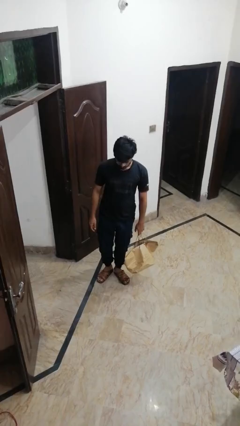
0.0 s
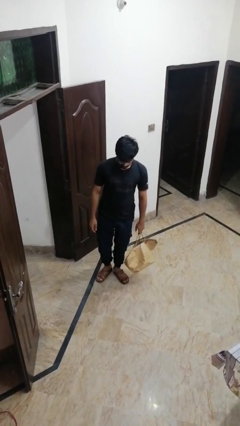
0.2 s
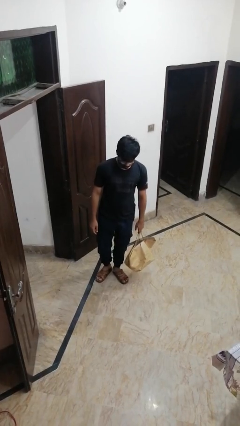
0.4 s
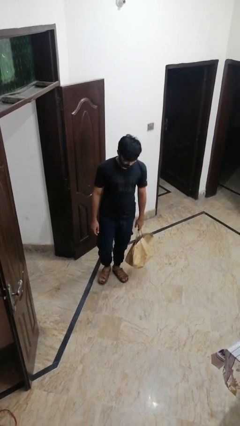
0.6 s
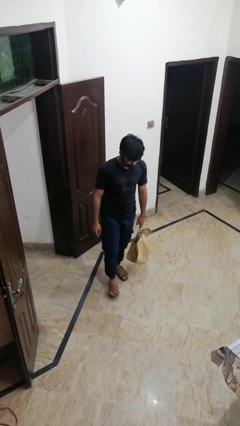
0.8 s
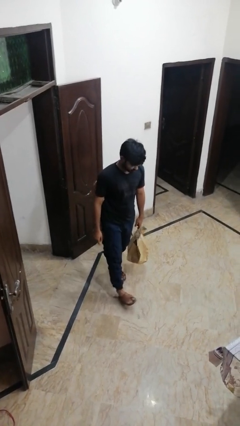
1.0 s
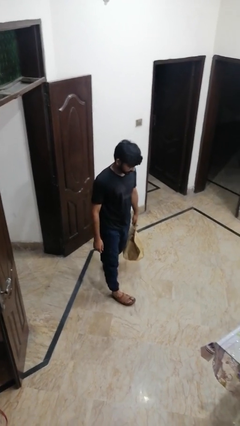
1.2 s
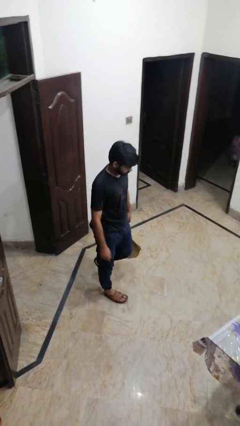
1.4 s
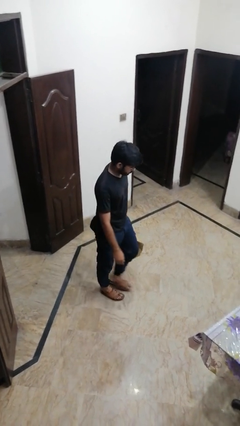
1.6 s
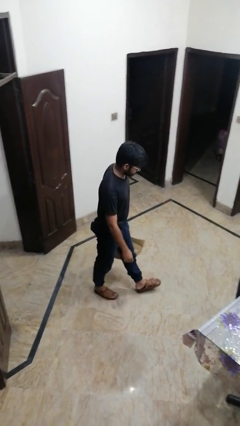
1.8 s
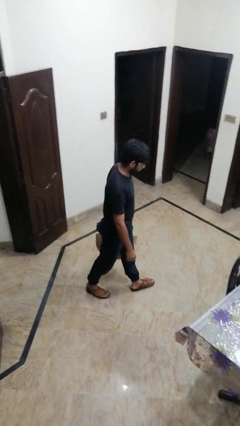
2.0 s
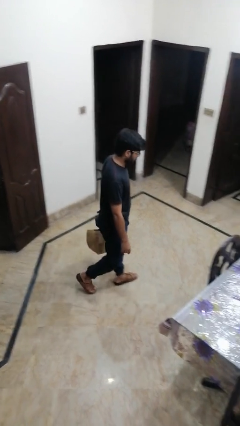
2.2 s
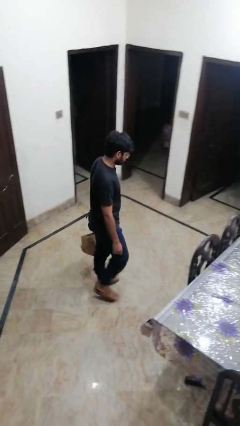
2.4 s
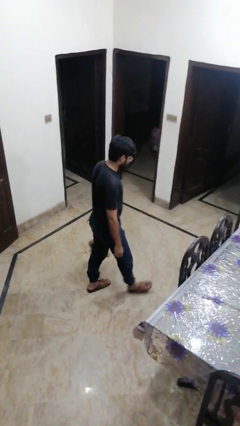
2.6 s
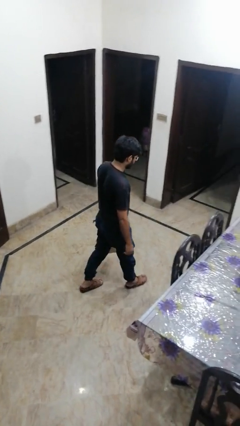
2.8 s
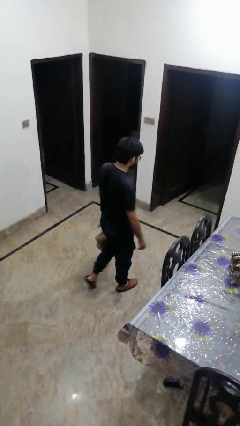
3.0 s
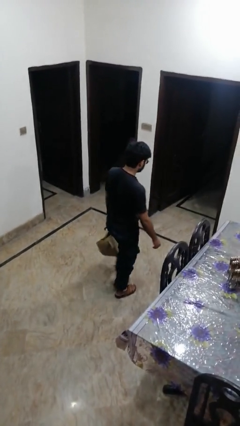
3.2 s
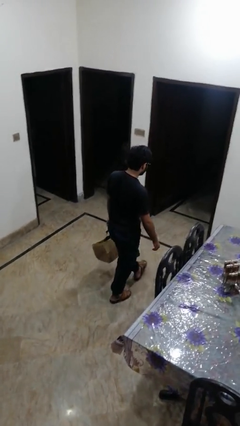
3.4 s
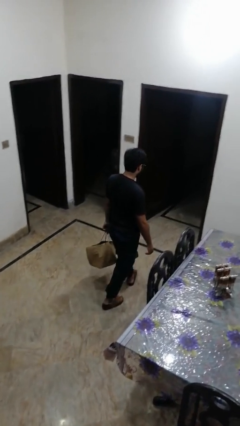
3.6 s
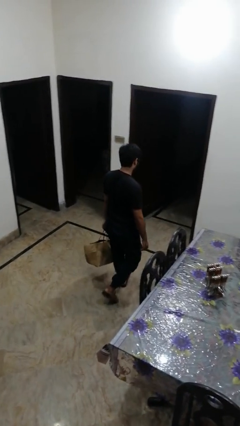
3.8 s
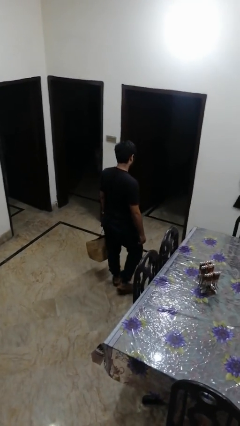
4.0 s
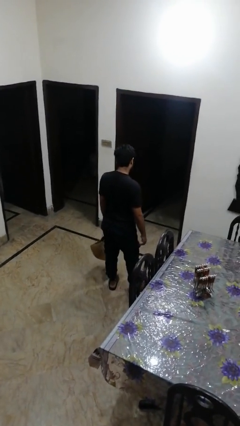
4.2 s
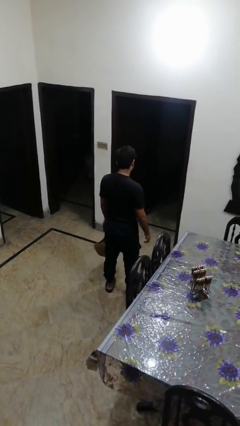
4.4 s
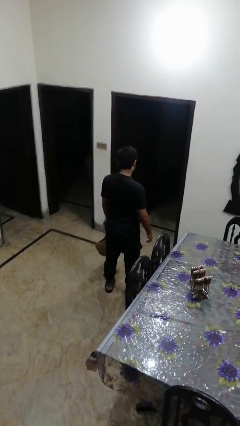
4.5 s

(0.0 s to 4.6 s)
person carries groceries

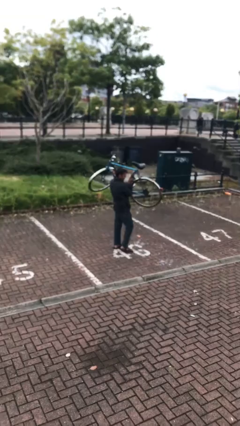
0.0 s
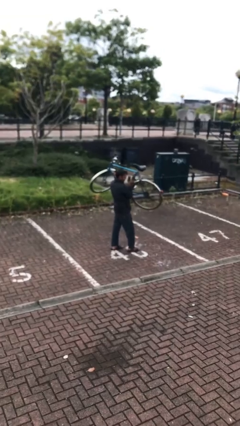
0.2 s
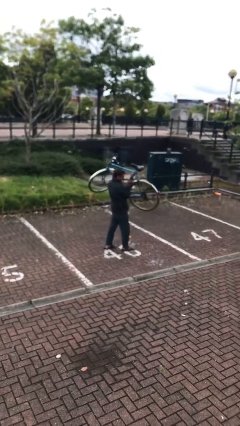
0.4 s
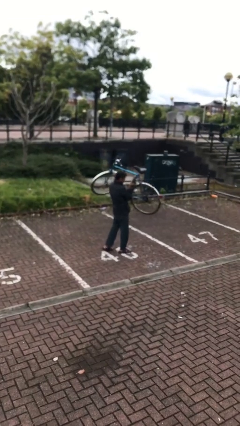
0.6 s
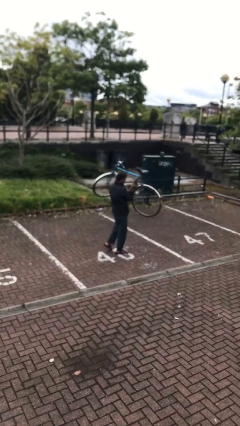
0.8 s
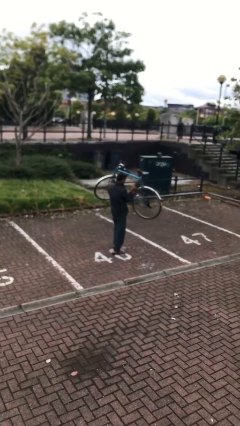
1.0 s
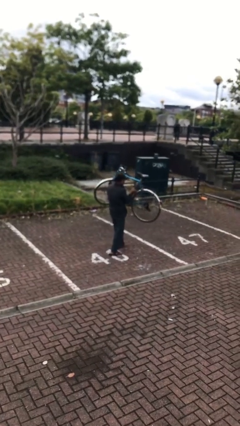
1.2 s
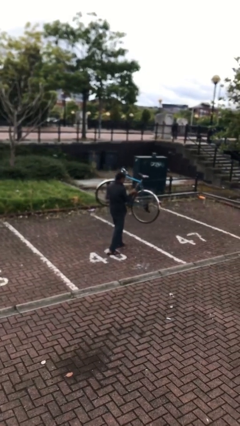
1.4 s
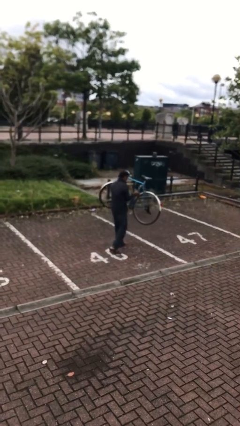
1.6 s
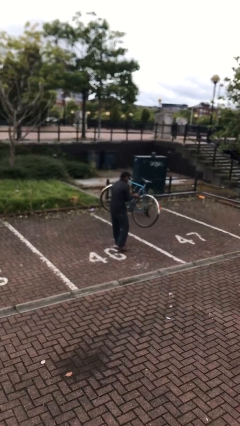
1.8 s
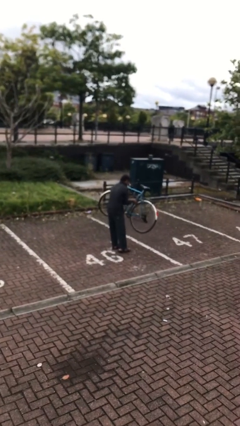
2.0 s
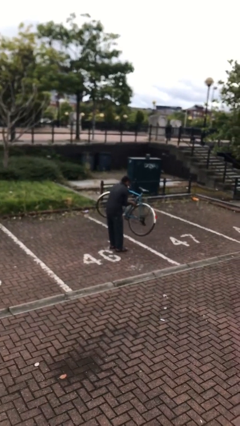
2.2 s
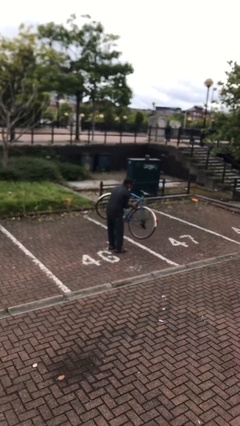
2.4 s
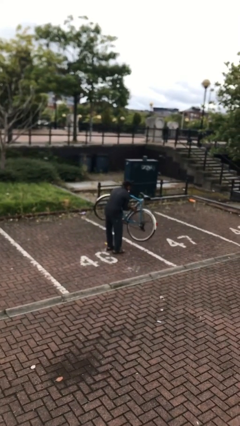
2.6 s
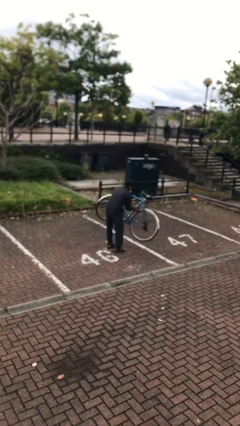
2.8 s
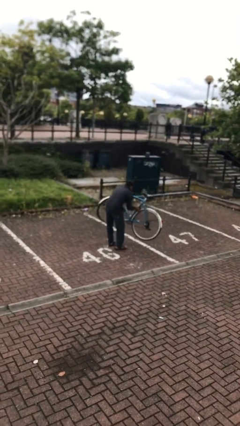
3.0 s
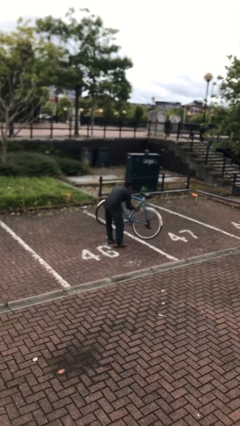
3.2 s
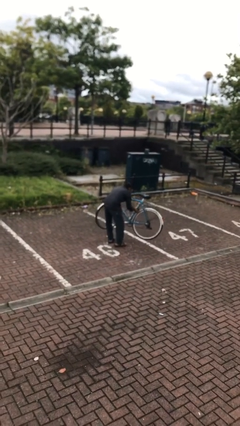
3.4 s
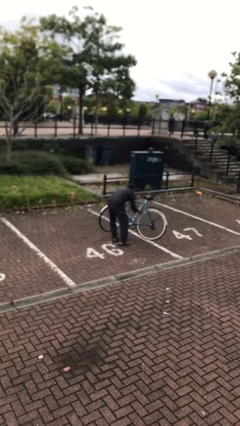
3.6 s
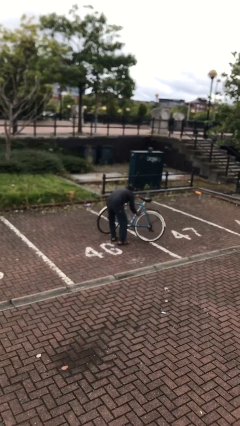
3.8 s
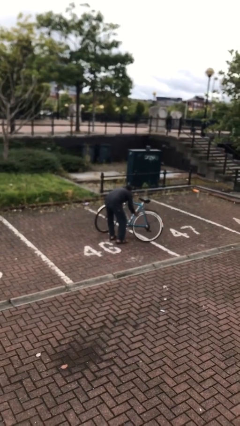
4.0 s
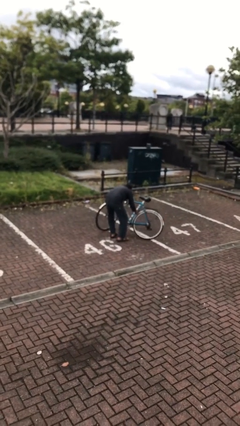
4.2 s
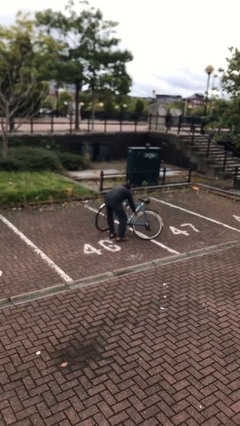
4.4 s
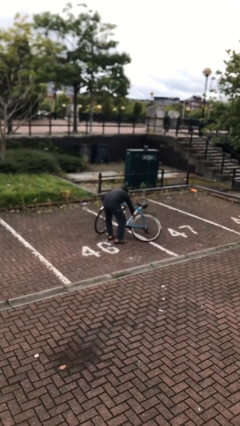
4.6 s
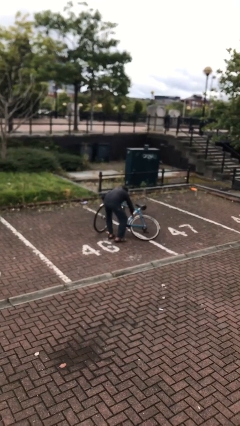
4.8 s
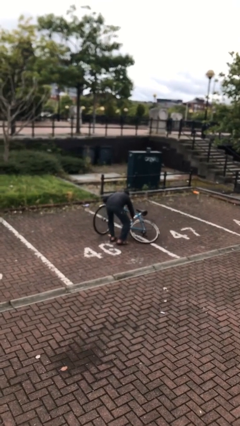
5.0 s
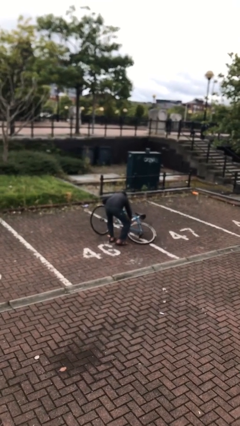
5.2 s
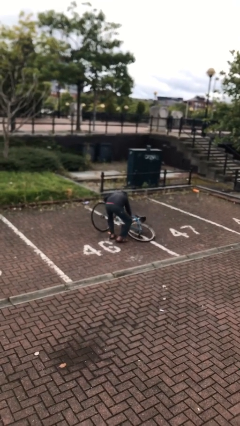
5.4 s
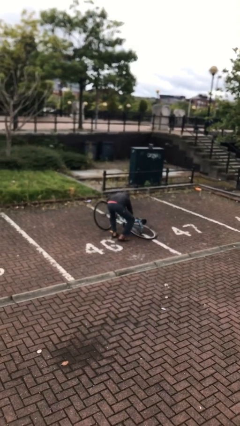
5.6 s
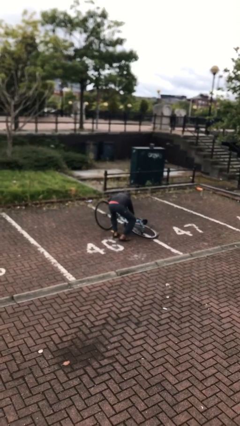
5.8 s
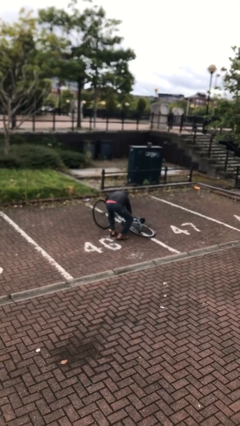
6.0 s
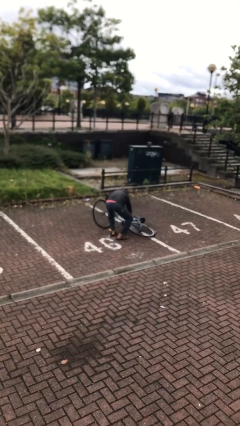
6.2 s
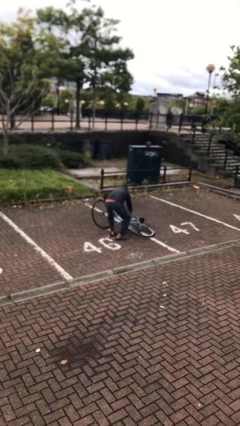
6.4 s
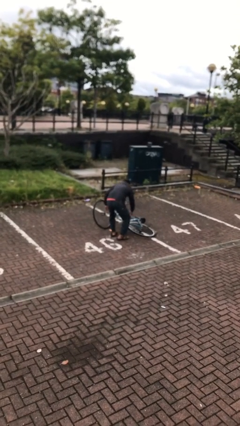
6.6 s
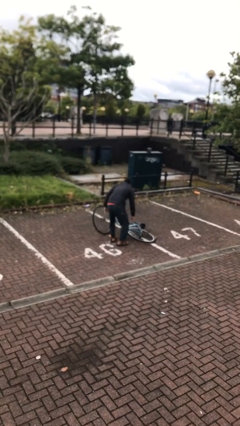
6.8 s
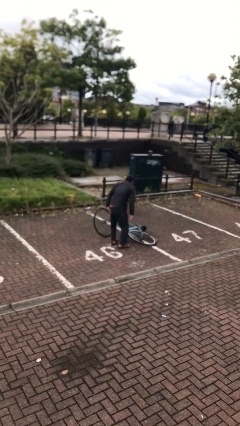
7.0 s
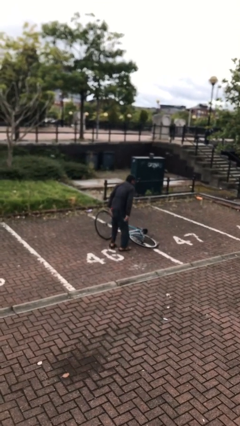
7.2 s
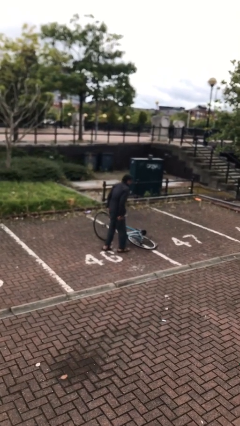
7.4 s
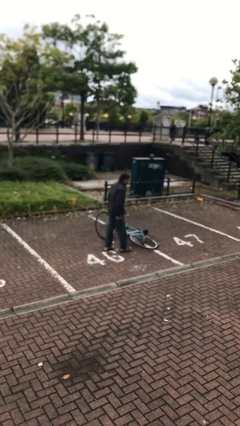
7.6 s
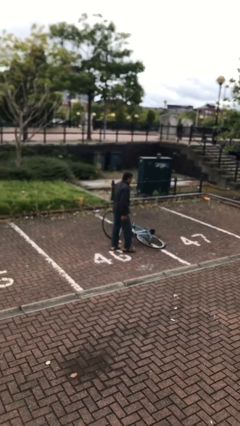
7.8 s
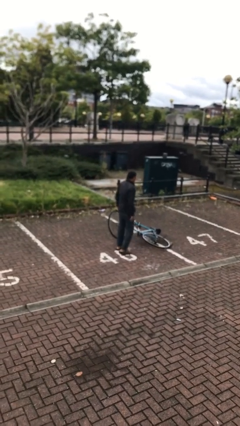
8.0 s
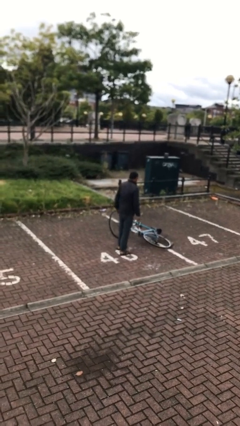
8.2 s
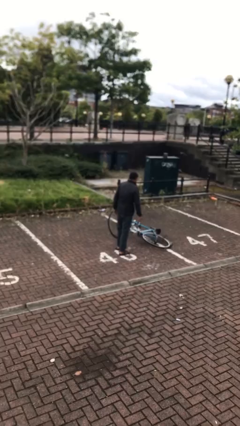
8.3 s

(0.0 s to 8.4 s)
person puts down object on floor

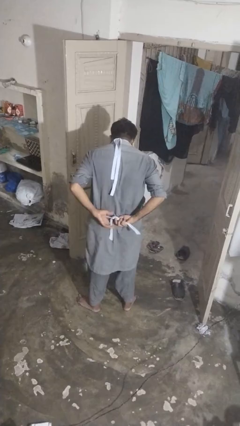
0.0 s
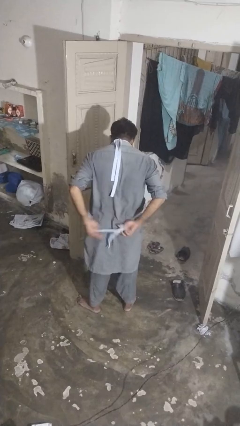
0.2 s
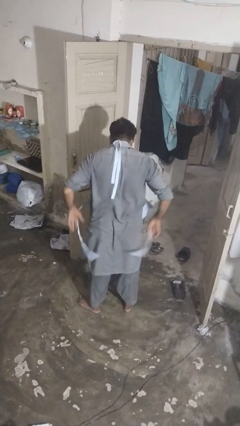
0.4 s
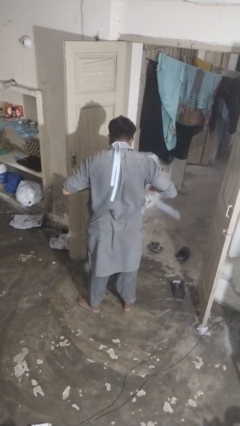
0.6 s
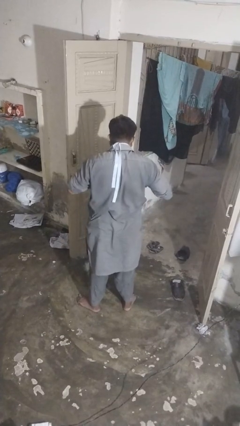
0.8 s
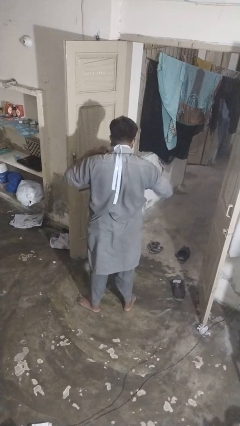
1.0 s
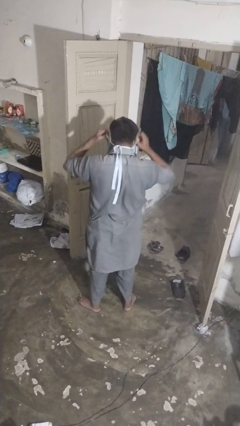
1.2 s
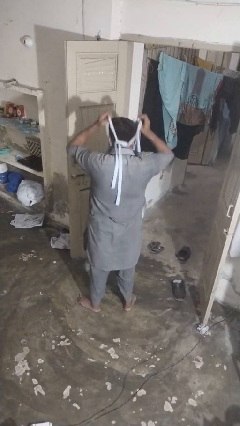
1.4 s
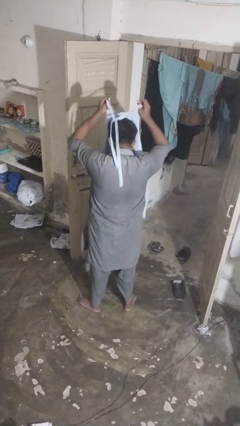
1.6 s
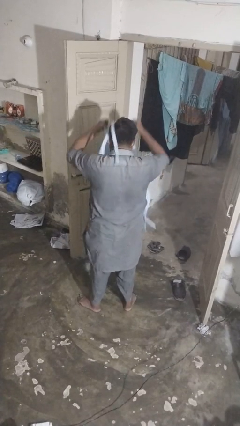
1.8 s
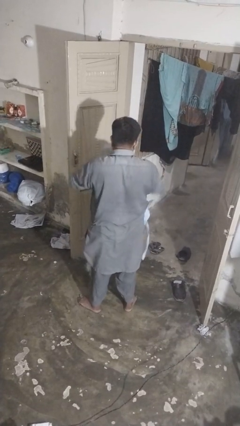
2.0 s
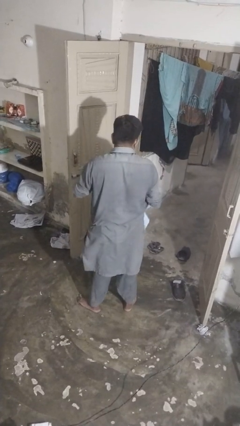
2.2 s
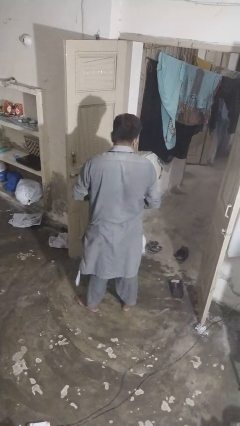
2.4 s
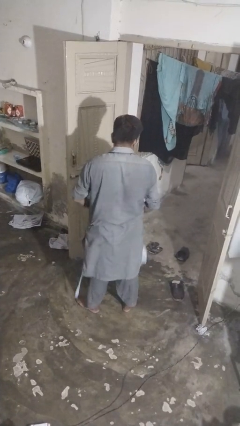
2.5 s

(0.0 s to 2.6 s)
person takes off apron

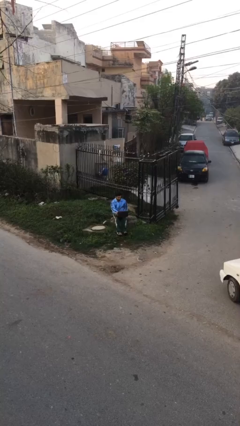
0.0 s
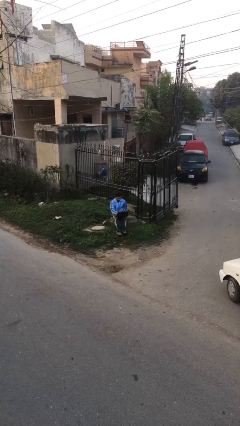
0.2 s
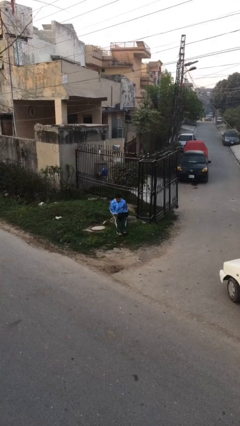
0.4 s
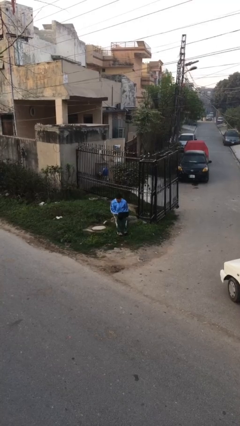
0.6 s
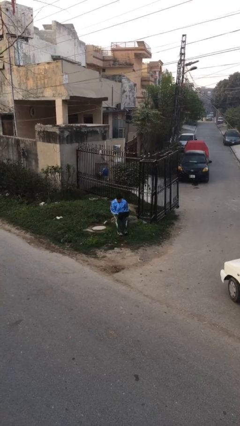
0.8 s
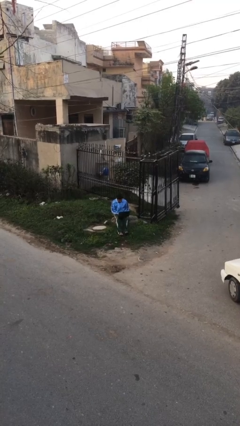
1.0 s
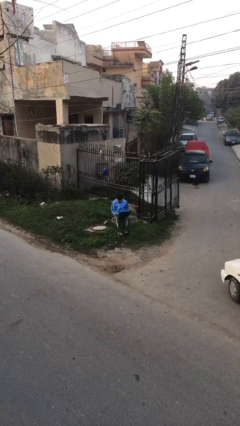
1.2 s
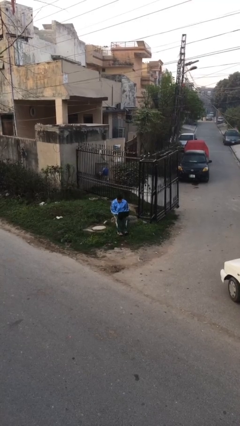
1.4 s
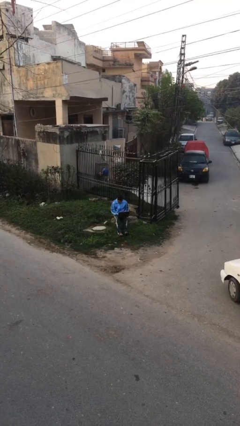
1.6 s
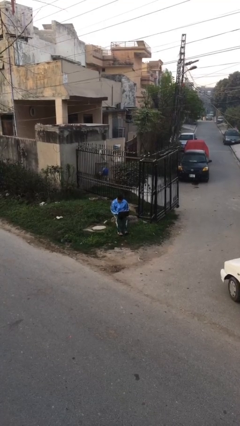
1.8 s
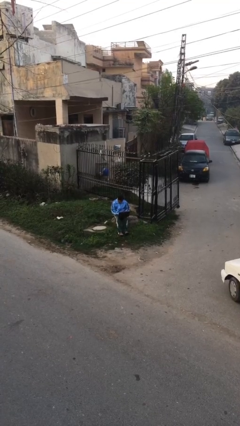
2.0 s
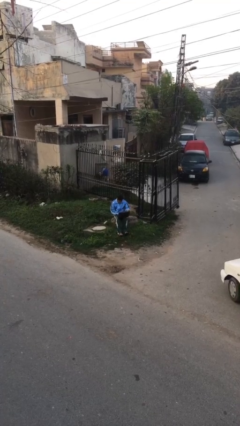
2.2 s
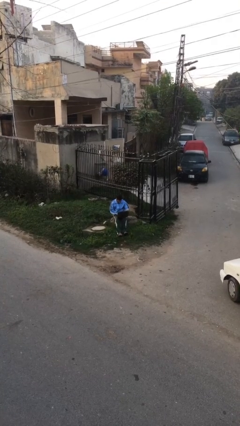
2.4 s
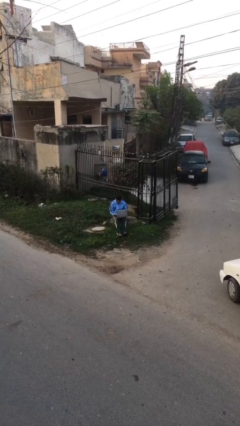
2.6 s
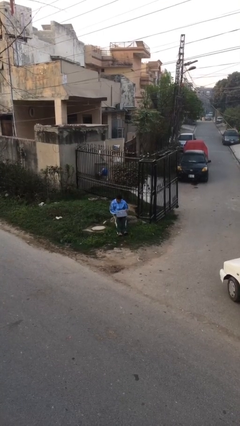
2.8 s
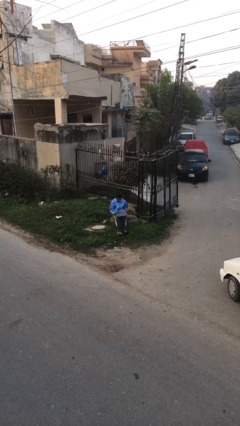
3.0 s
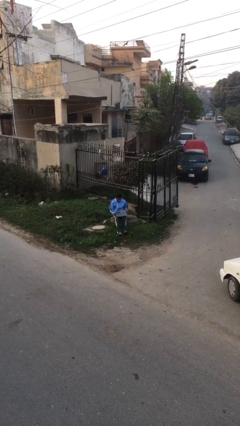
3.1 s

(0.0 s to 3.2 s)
person interacts with laptop
